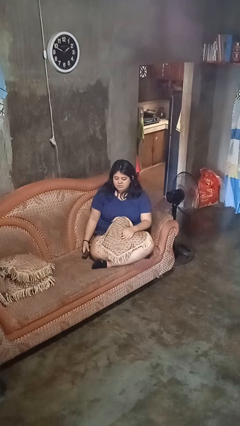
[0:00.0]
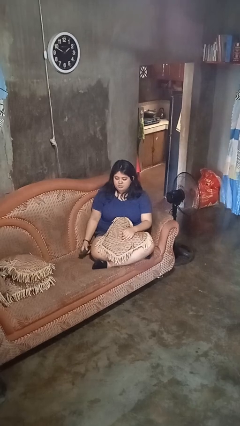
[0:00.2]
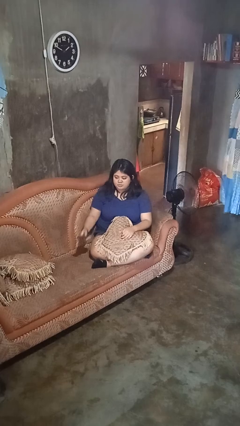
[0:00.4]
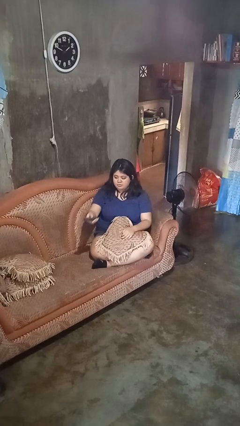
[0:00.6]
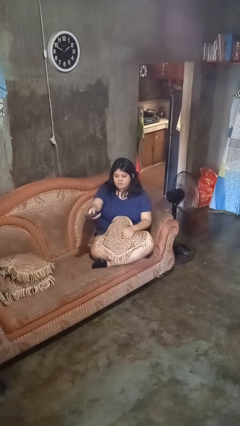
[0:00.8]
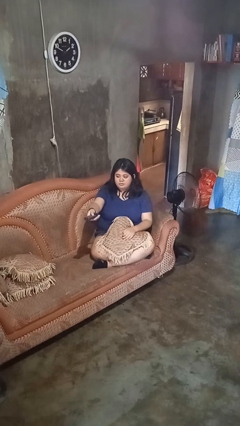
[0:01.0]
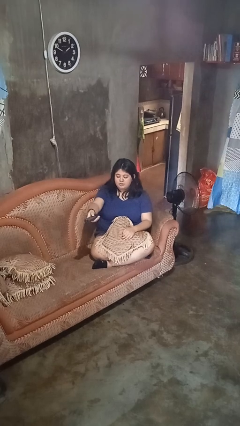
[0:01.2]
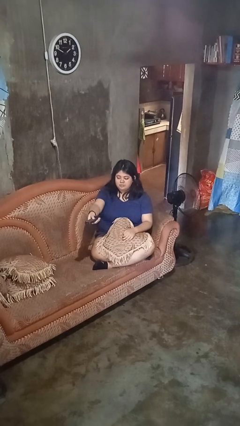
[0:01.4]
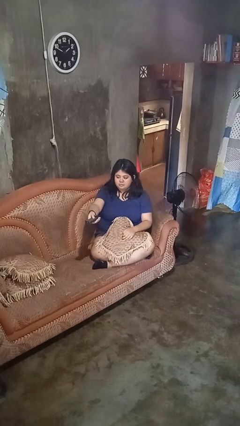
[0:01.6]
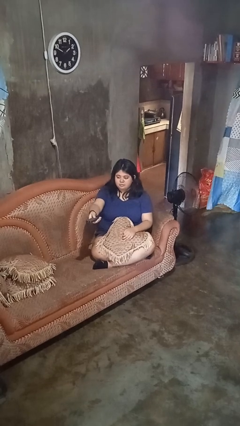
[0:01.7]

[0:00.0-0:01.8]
person uses television remote

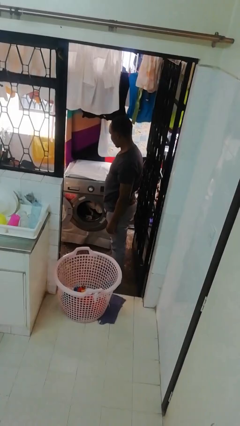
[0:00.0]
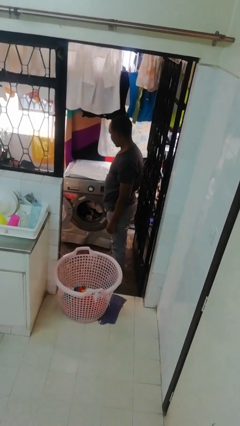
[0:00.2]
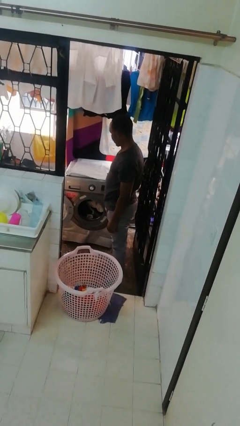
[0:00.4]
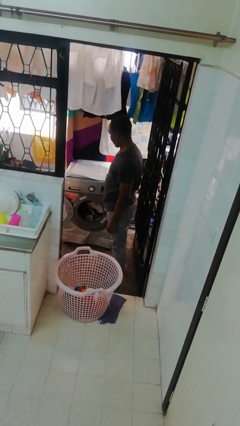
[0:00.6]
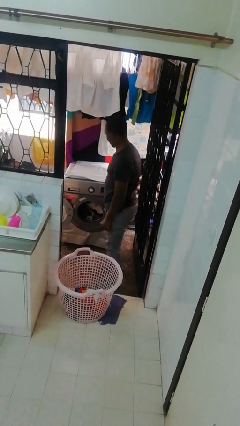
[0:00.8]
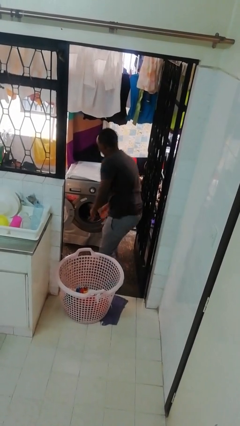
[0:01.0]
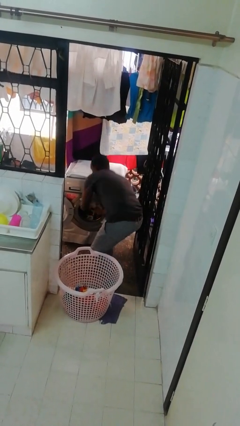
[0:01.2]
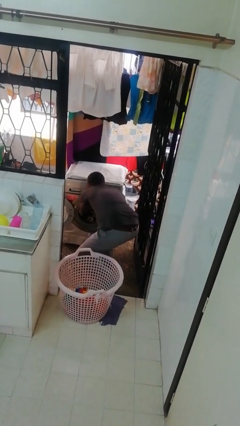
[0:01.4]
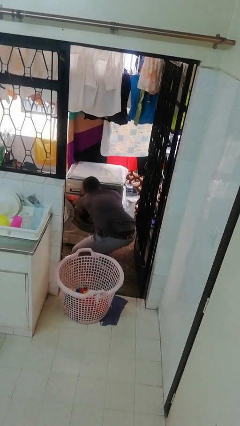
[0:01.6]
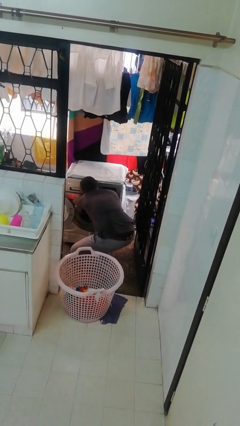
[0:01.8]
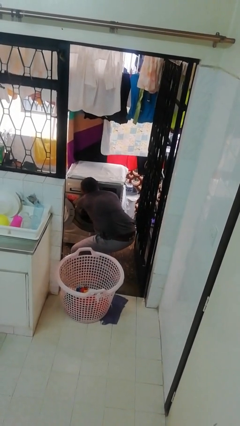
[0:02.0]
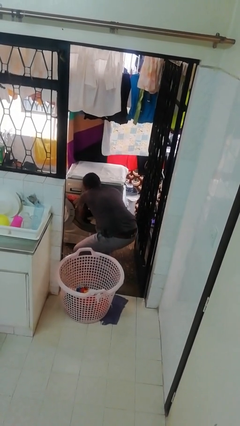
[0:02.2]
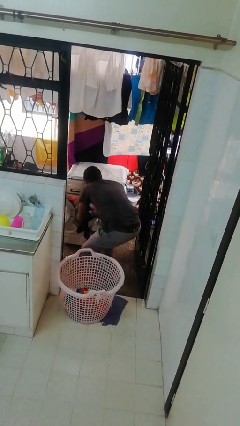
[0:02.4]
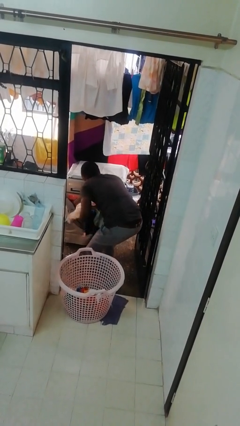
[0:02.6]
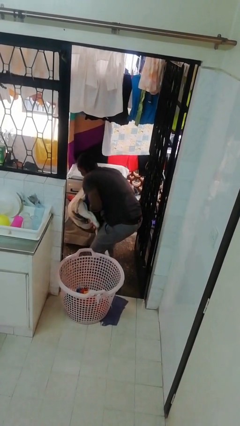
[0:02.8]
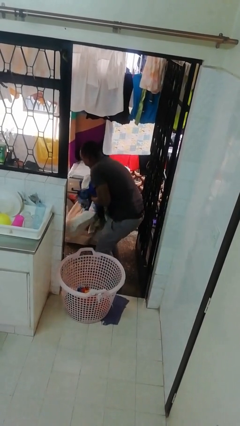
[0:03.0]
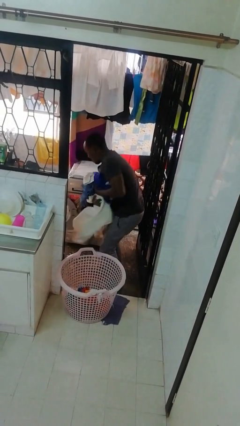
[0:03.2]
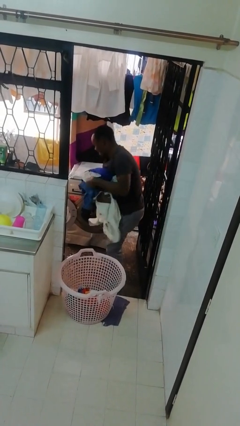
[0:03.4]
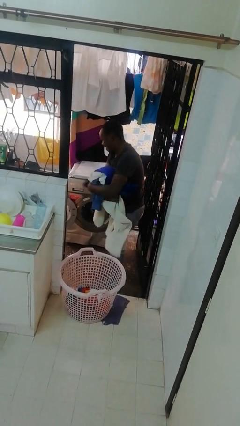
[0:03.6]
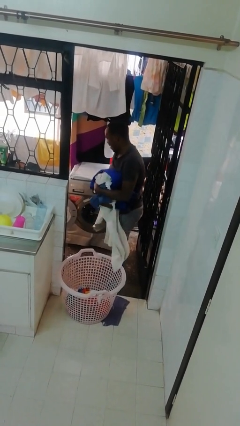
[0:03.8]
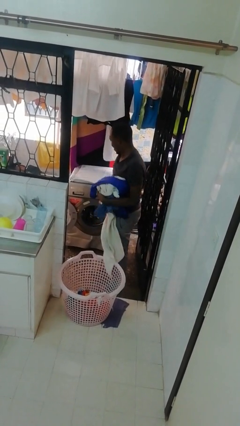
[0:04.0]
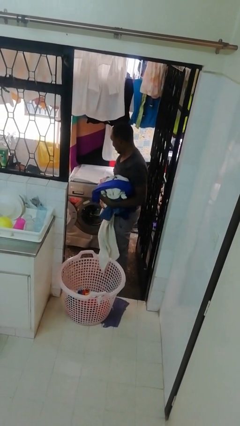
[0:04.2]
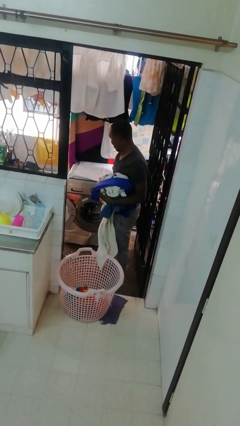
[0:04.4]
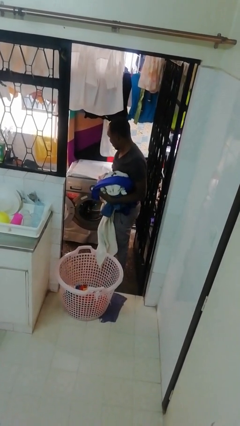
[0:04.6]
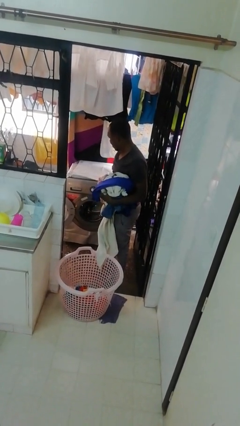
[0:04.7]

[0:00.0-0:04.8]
person unloads clotheswasher

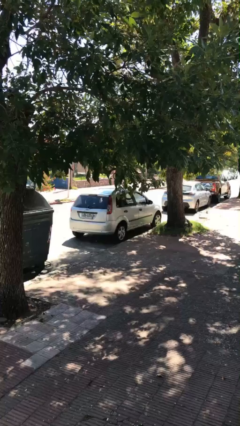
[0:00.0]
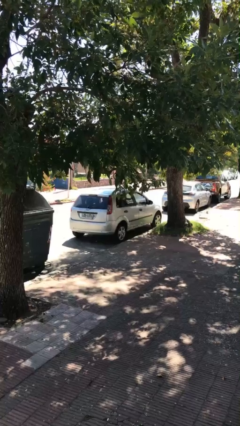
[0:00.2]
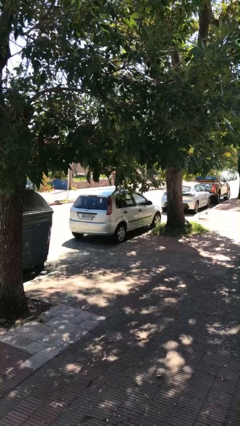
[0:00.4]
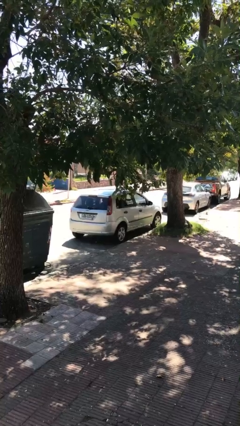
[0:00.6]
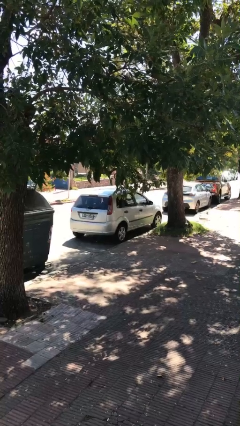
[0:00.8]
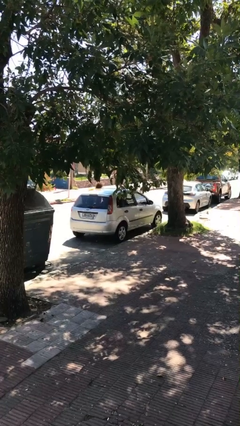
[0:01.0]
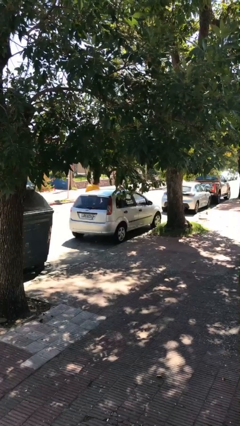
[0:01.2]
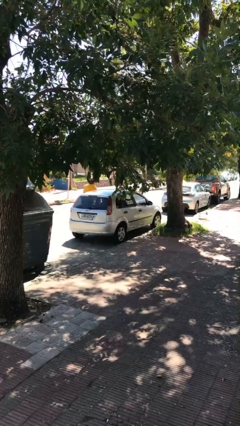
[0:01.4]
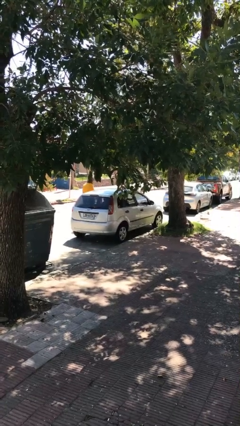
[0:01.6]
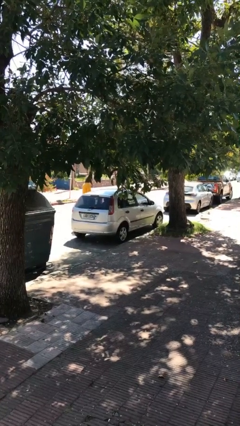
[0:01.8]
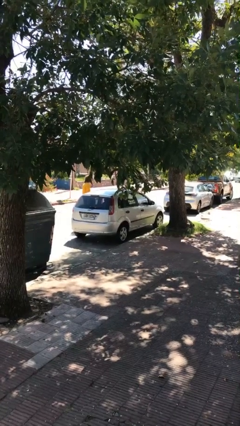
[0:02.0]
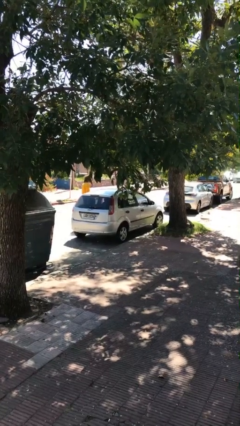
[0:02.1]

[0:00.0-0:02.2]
car drops off person

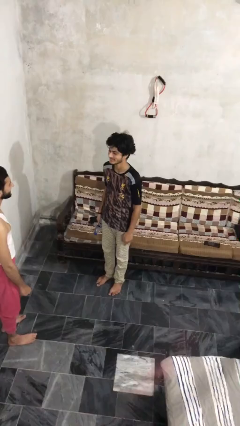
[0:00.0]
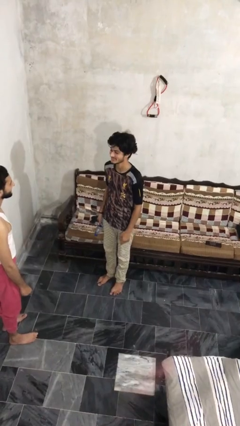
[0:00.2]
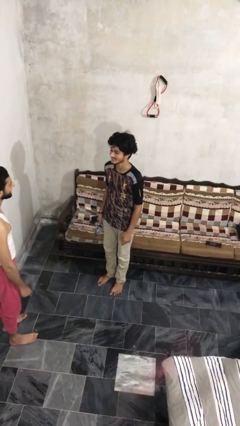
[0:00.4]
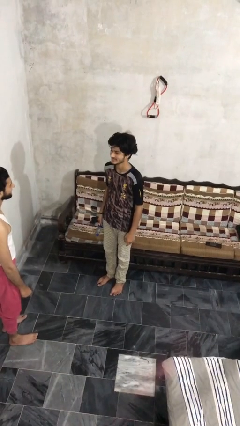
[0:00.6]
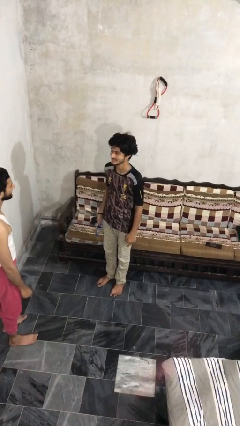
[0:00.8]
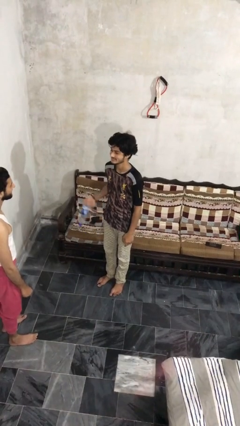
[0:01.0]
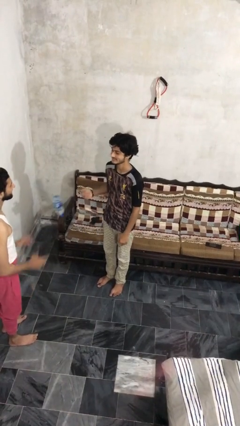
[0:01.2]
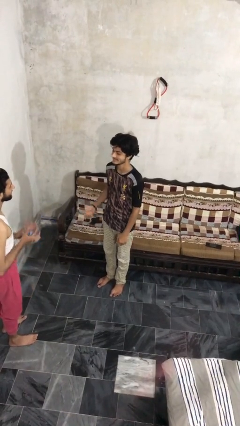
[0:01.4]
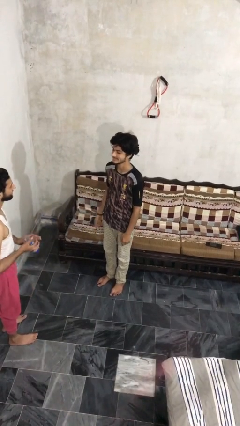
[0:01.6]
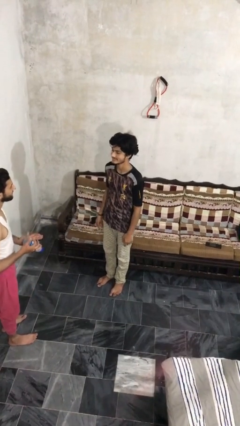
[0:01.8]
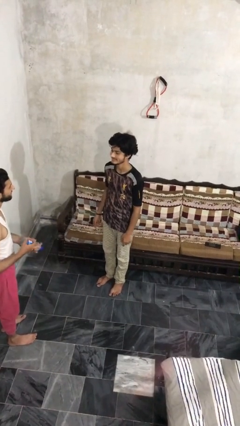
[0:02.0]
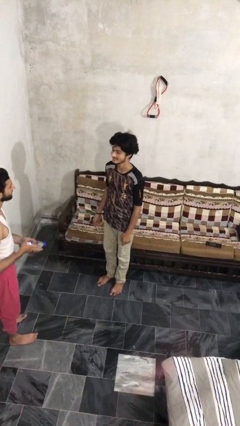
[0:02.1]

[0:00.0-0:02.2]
person throws object to person

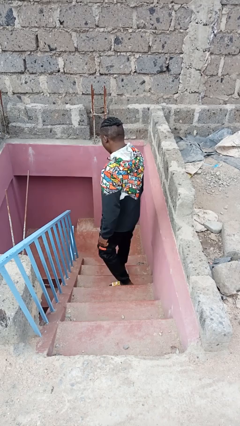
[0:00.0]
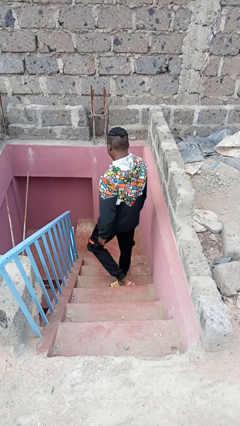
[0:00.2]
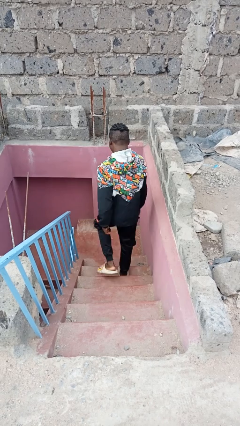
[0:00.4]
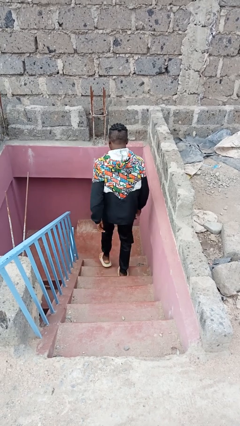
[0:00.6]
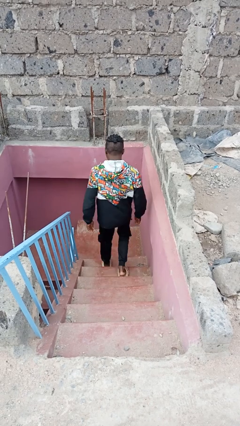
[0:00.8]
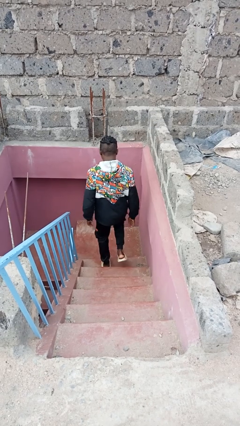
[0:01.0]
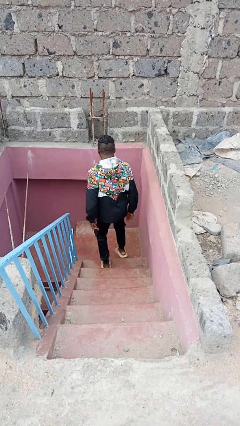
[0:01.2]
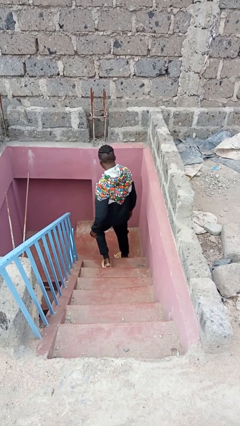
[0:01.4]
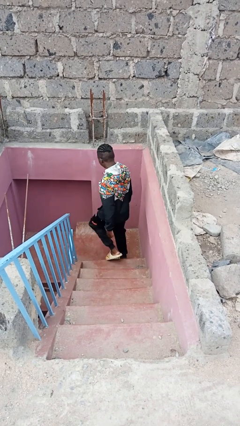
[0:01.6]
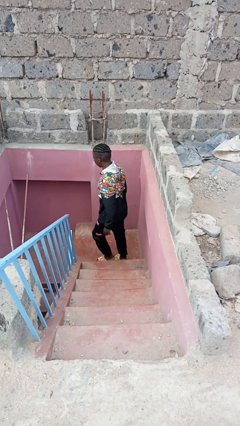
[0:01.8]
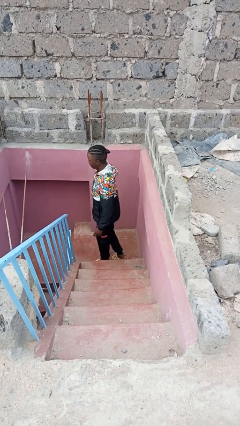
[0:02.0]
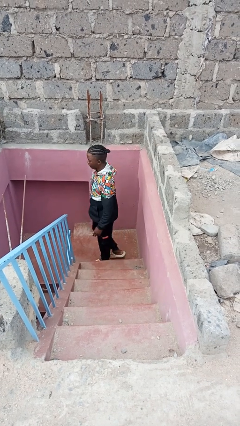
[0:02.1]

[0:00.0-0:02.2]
person climbs down stairs

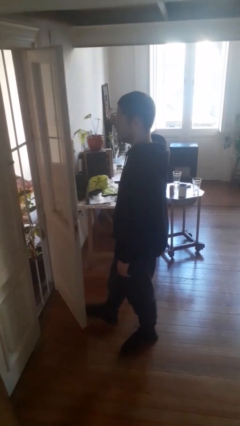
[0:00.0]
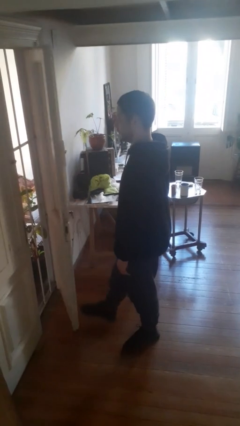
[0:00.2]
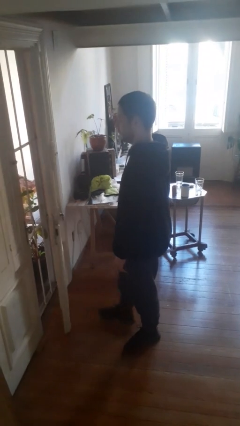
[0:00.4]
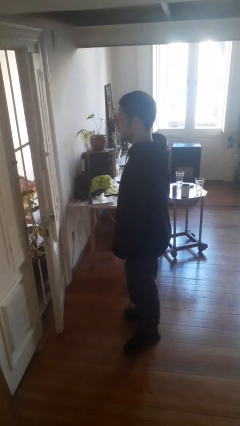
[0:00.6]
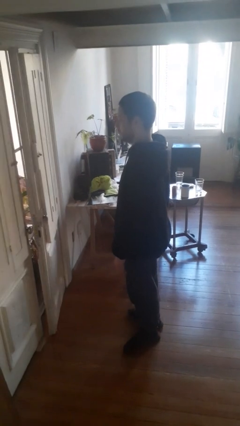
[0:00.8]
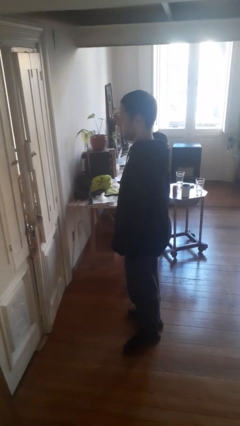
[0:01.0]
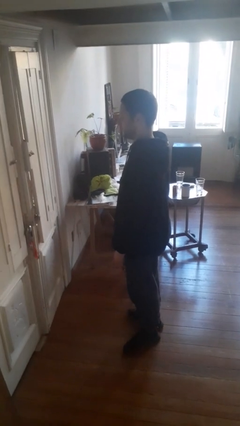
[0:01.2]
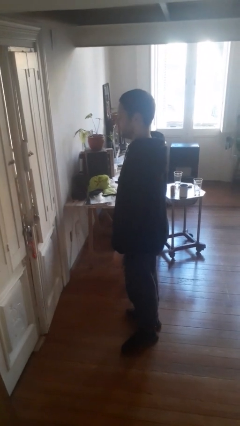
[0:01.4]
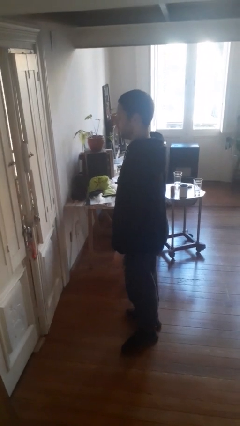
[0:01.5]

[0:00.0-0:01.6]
person closes door with foot

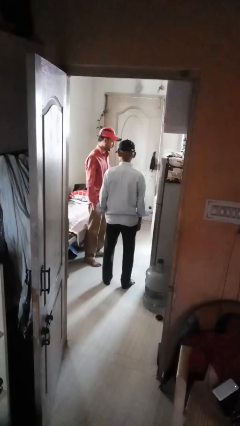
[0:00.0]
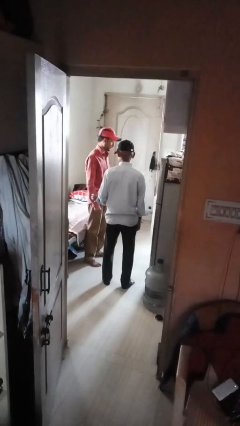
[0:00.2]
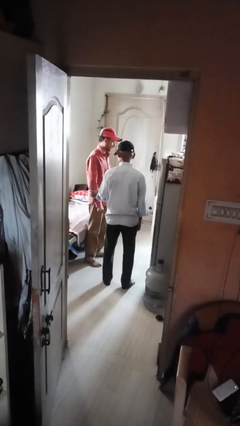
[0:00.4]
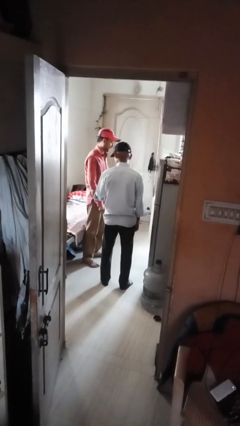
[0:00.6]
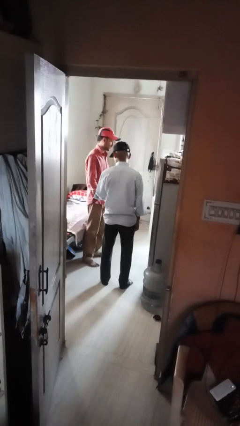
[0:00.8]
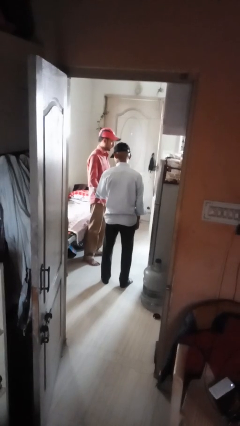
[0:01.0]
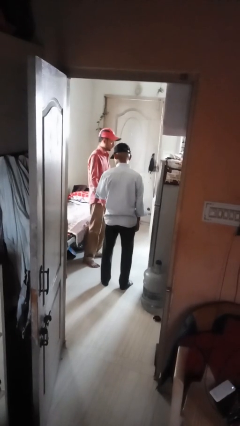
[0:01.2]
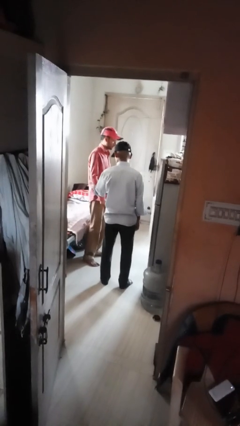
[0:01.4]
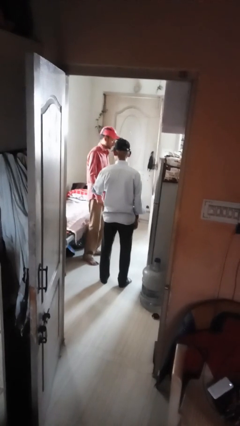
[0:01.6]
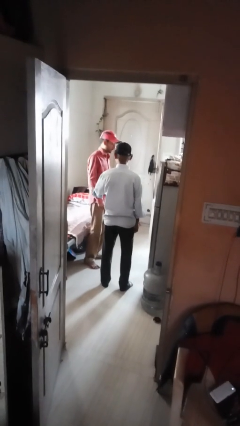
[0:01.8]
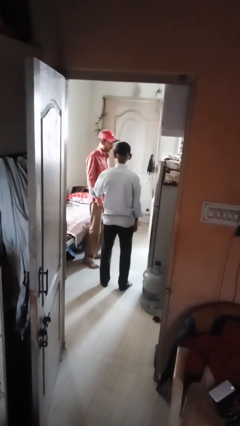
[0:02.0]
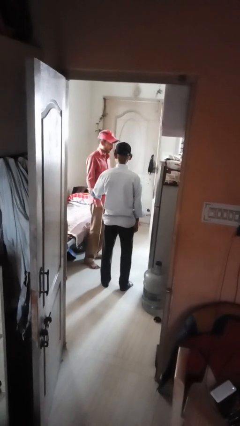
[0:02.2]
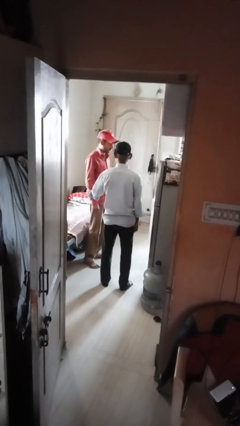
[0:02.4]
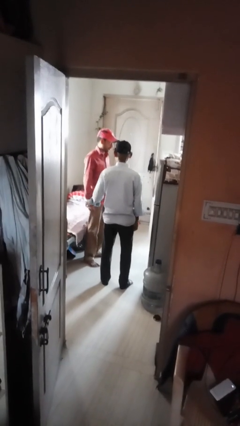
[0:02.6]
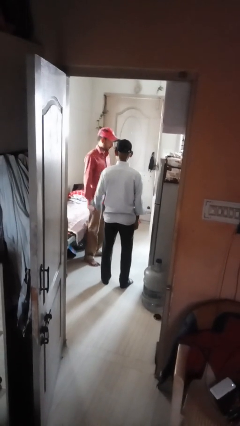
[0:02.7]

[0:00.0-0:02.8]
person grabs person by forearm
